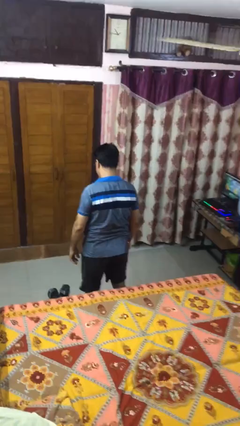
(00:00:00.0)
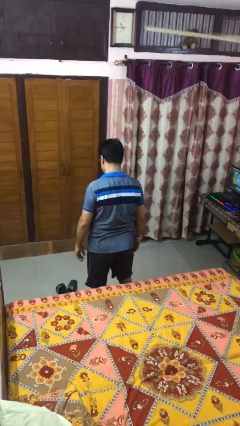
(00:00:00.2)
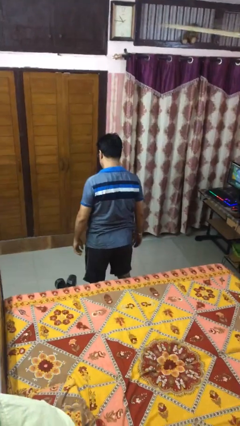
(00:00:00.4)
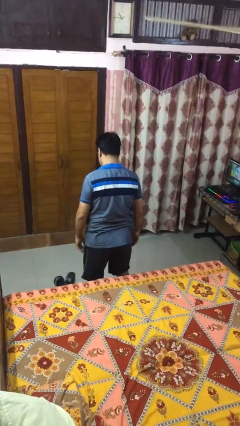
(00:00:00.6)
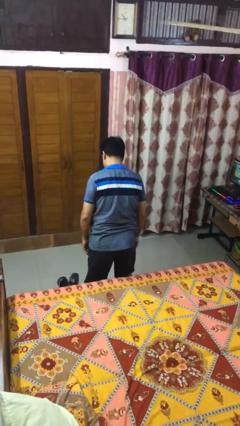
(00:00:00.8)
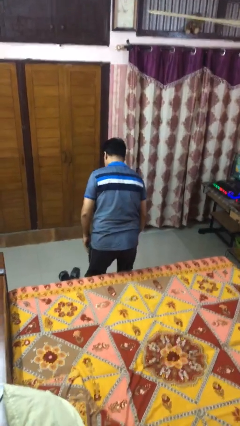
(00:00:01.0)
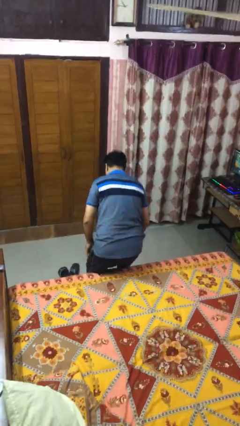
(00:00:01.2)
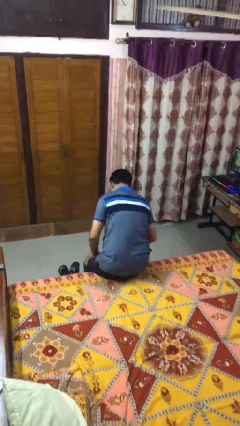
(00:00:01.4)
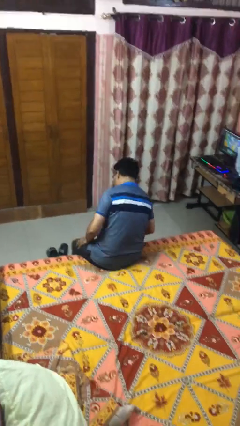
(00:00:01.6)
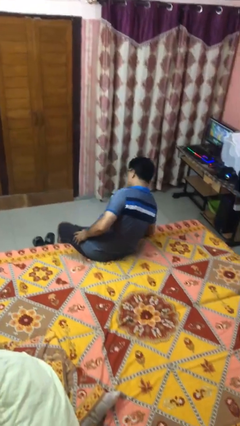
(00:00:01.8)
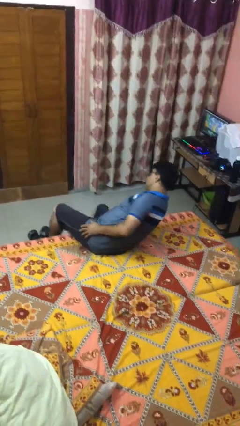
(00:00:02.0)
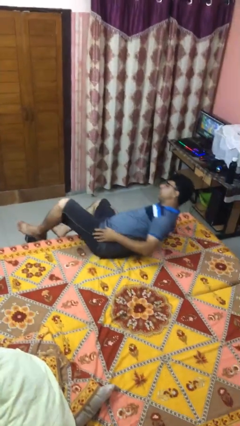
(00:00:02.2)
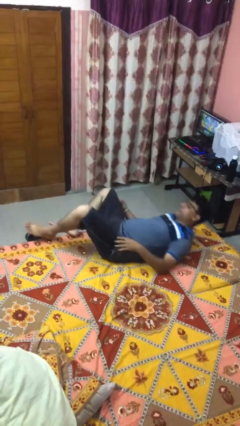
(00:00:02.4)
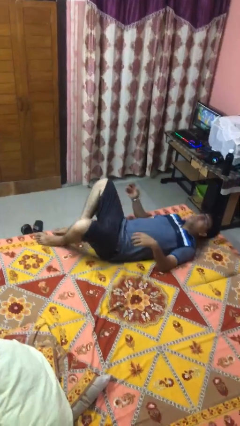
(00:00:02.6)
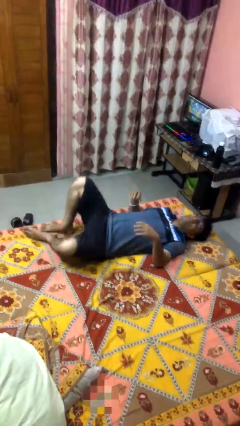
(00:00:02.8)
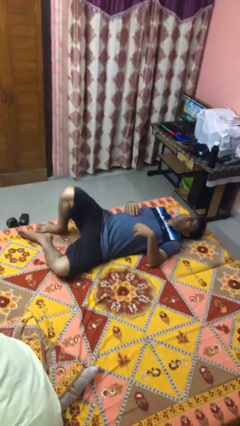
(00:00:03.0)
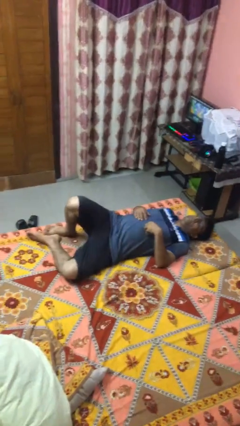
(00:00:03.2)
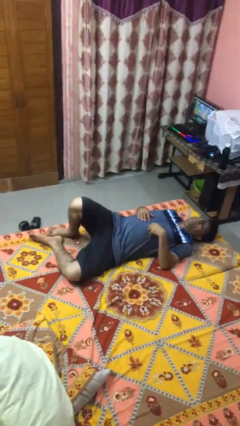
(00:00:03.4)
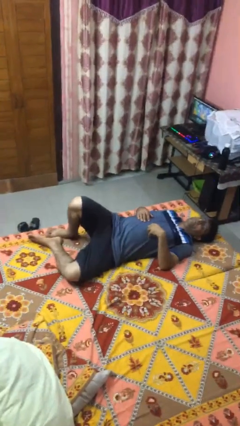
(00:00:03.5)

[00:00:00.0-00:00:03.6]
person lies down on bed

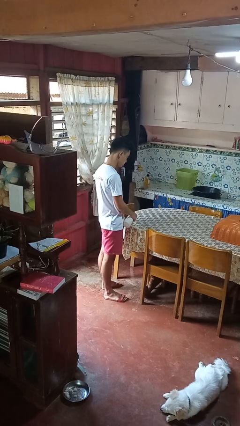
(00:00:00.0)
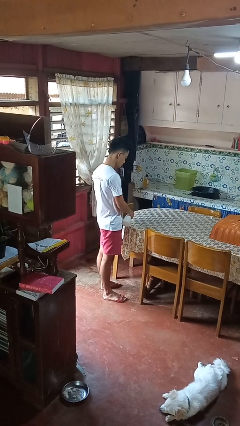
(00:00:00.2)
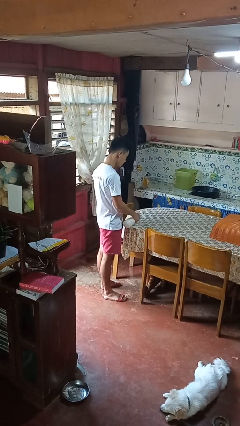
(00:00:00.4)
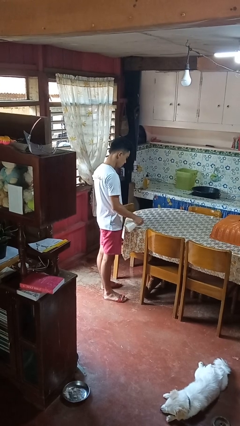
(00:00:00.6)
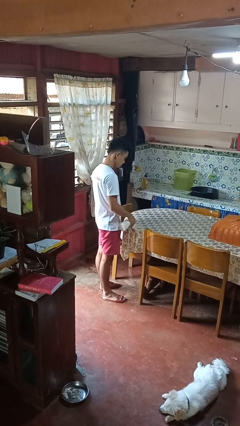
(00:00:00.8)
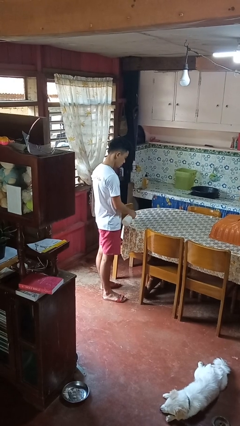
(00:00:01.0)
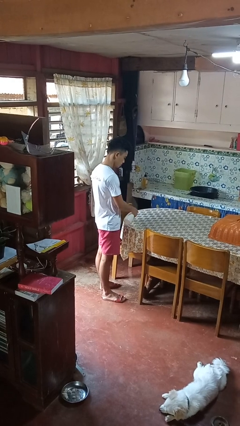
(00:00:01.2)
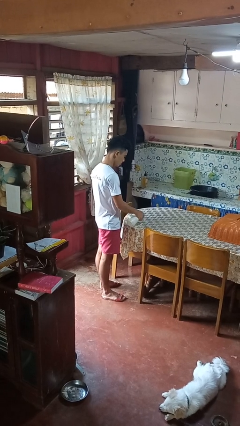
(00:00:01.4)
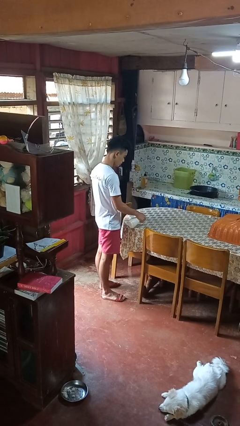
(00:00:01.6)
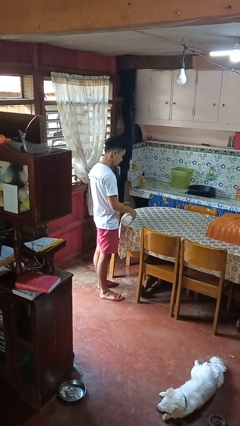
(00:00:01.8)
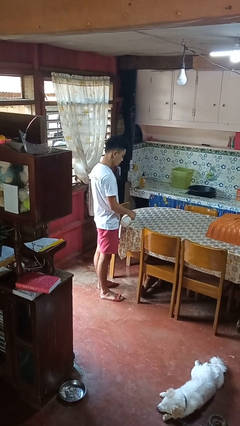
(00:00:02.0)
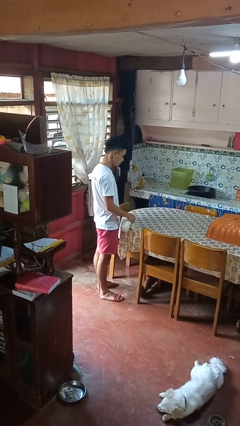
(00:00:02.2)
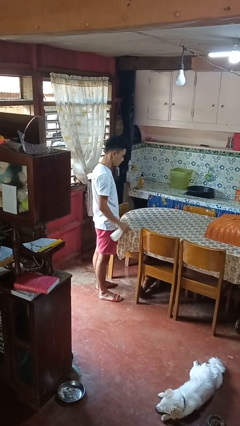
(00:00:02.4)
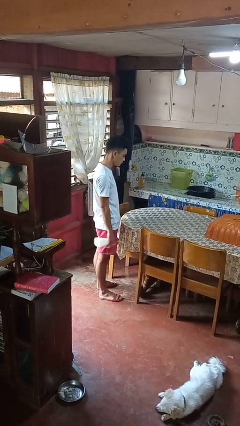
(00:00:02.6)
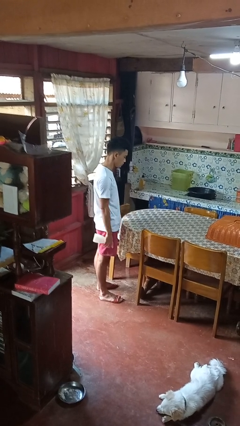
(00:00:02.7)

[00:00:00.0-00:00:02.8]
person sprays from bottle

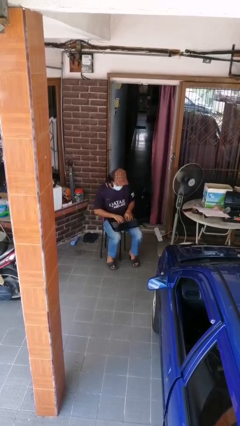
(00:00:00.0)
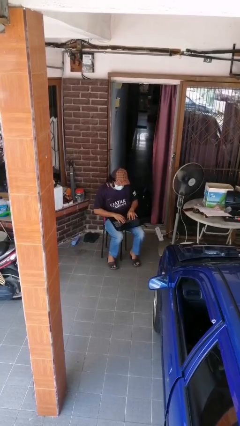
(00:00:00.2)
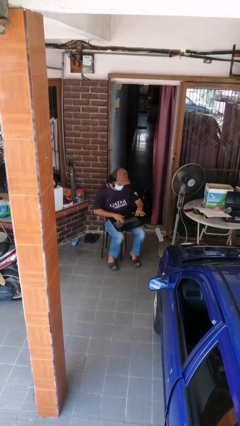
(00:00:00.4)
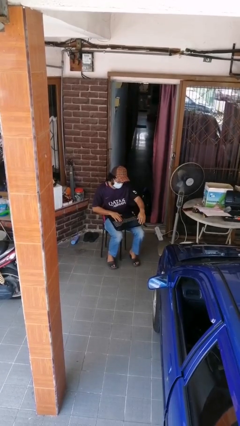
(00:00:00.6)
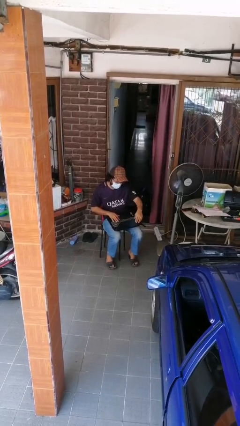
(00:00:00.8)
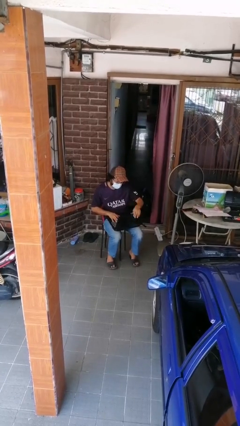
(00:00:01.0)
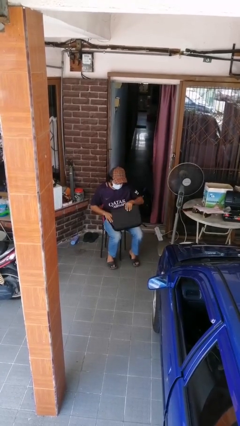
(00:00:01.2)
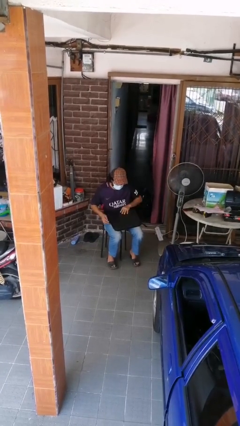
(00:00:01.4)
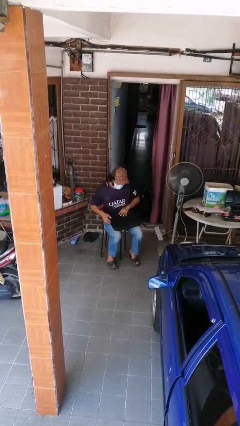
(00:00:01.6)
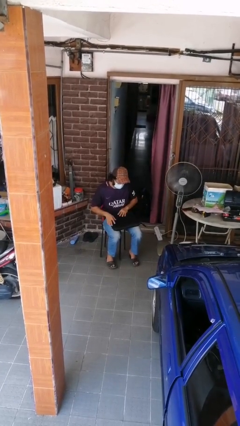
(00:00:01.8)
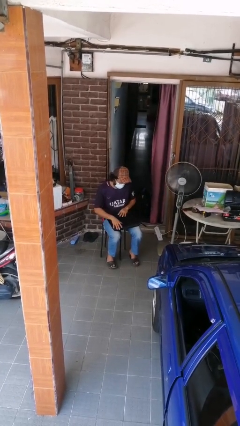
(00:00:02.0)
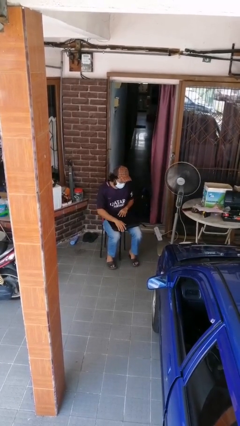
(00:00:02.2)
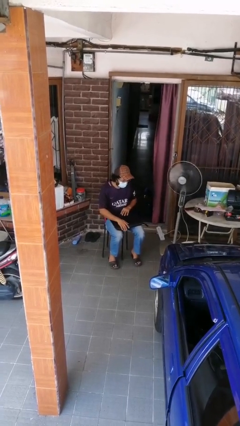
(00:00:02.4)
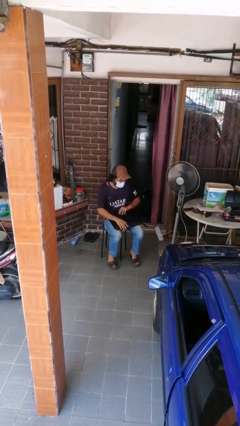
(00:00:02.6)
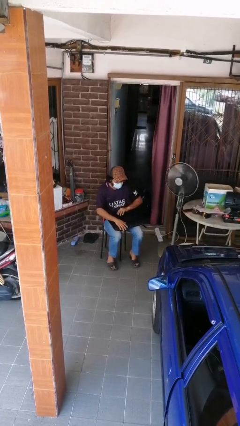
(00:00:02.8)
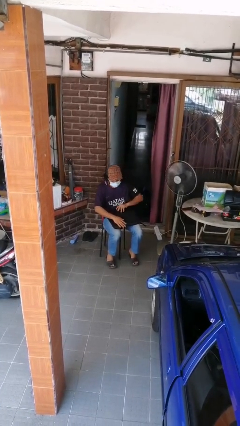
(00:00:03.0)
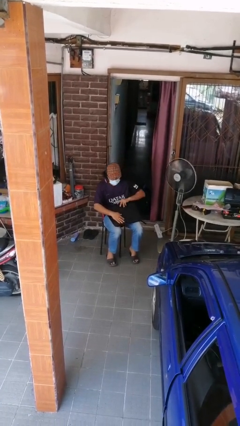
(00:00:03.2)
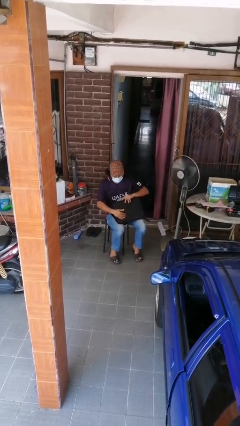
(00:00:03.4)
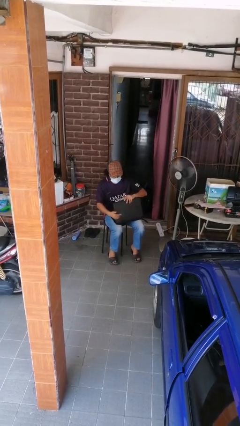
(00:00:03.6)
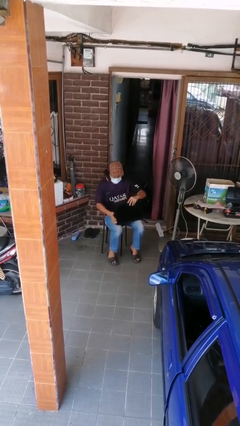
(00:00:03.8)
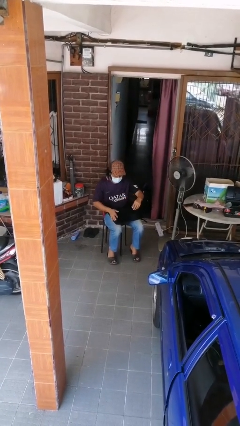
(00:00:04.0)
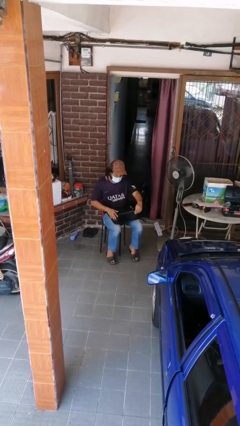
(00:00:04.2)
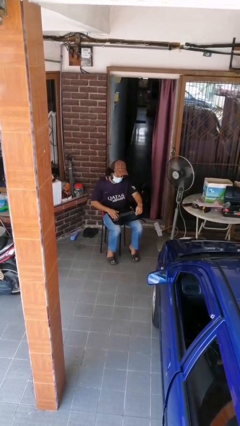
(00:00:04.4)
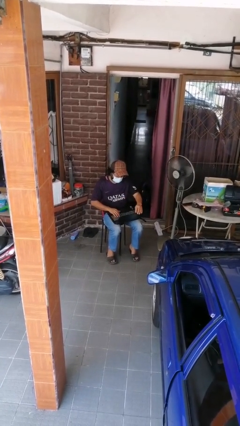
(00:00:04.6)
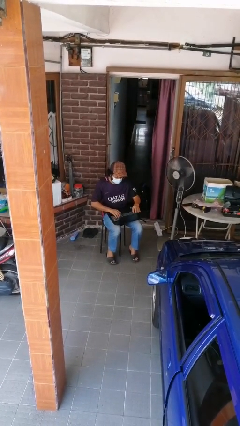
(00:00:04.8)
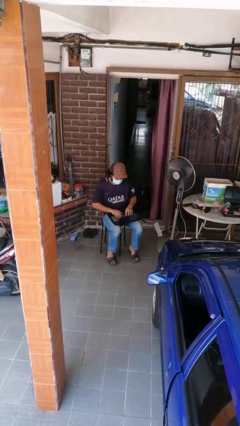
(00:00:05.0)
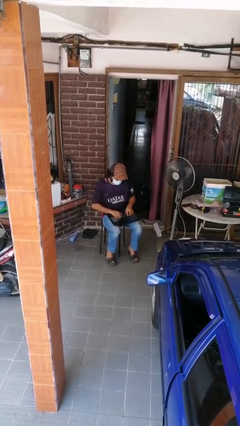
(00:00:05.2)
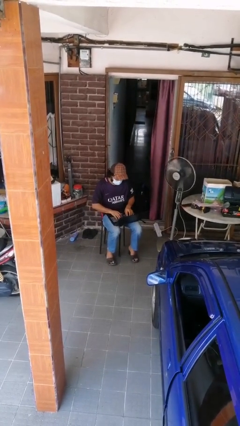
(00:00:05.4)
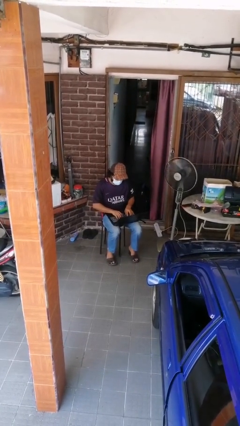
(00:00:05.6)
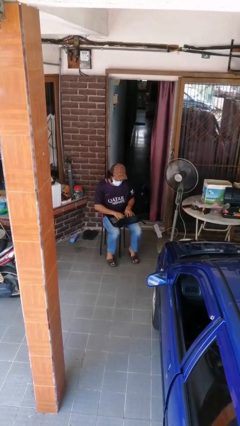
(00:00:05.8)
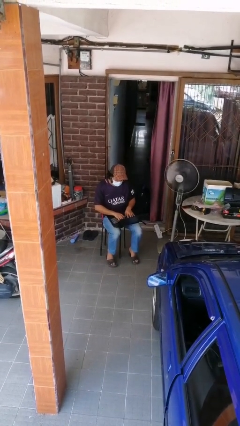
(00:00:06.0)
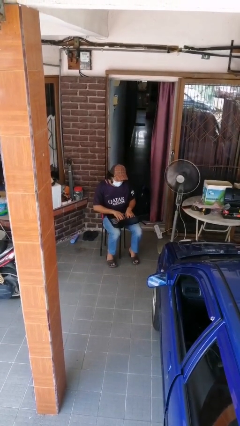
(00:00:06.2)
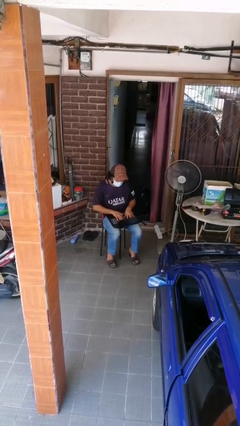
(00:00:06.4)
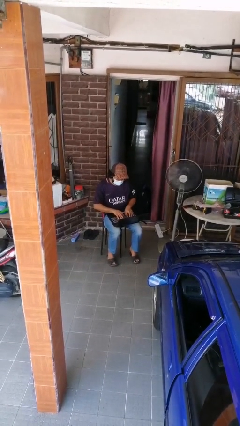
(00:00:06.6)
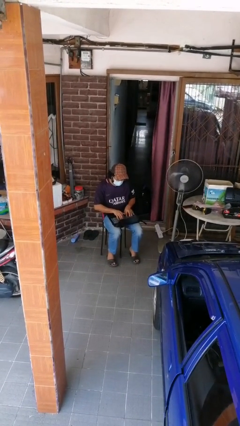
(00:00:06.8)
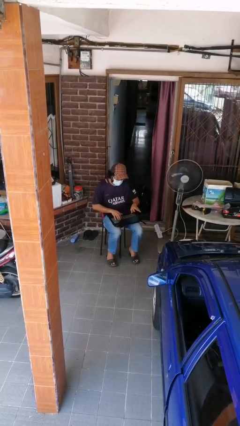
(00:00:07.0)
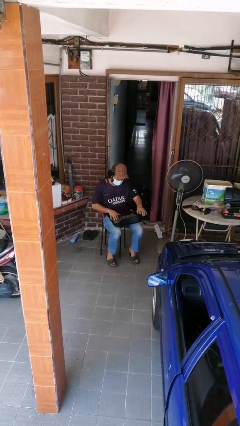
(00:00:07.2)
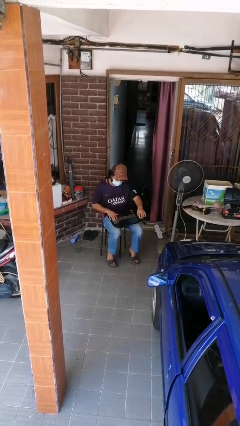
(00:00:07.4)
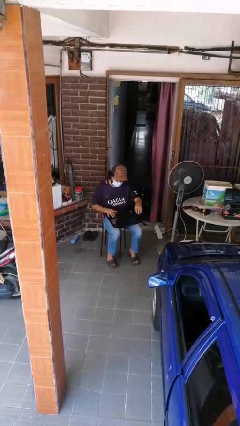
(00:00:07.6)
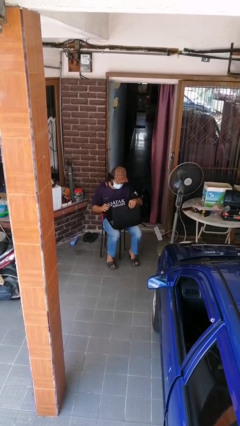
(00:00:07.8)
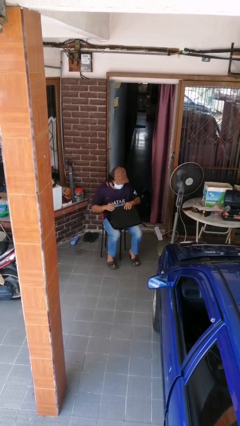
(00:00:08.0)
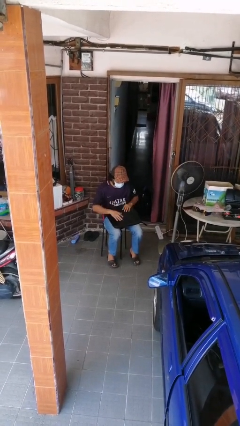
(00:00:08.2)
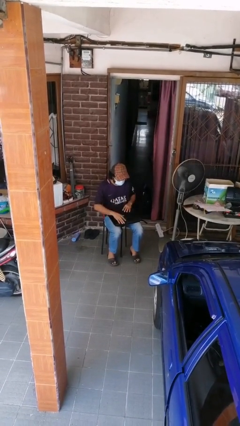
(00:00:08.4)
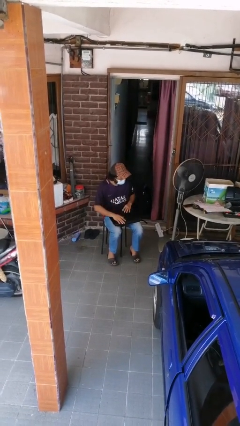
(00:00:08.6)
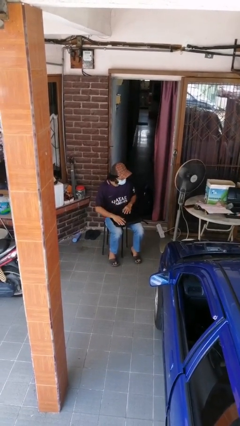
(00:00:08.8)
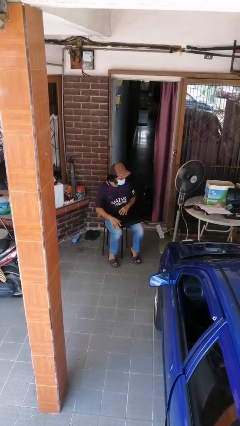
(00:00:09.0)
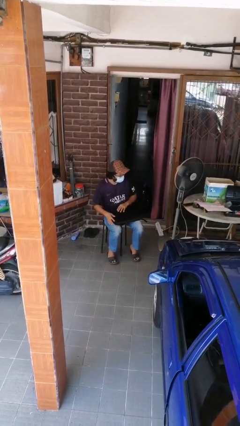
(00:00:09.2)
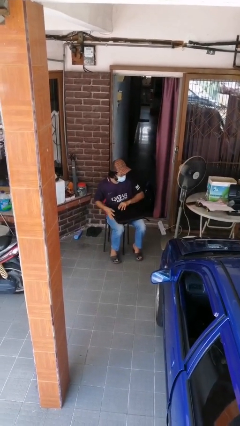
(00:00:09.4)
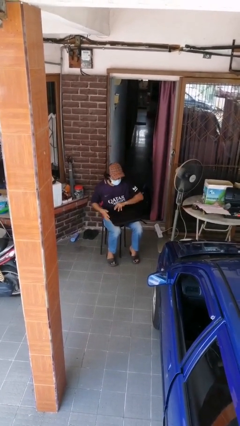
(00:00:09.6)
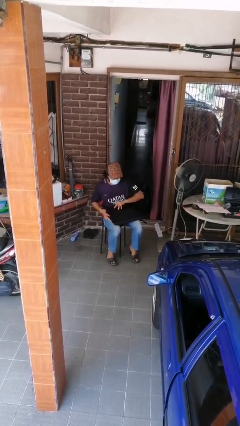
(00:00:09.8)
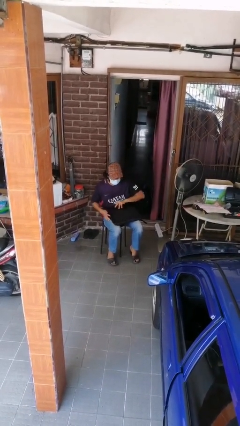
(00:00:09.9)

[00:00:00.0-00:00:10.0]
person interacts with laptop

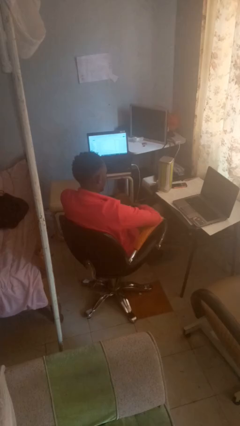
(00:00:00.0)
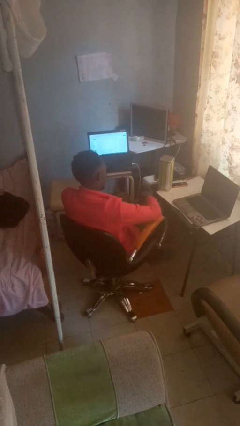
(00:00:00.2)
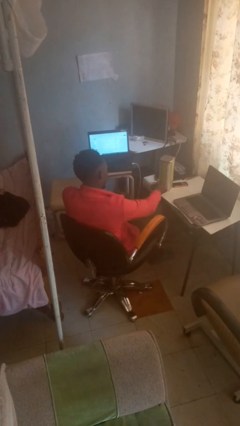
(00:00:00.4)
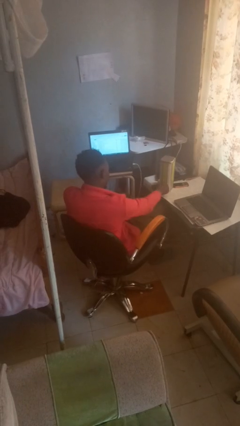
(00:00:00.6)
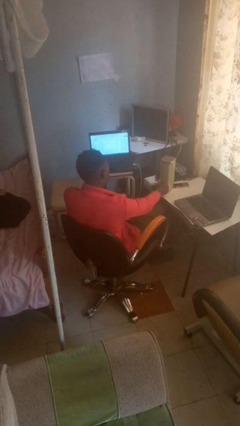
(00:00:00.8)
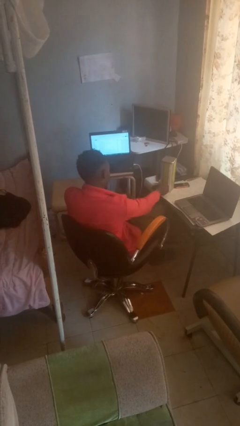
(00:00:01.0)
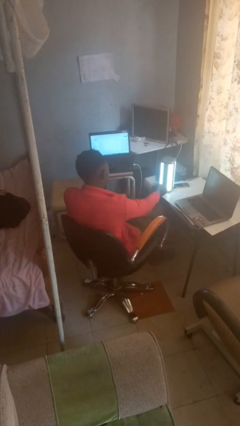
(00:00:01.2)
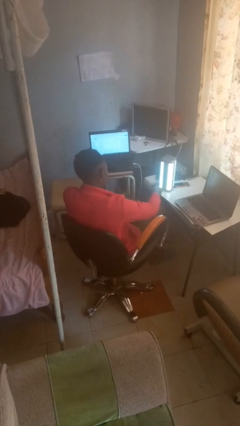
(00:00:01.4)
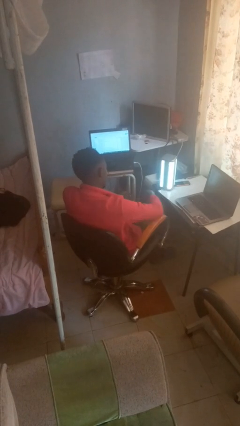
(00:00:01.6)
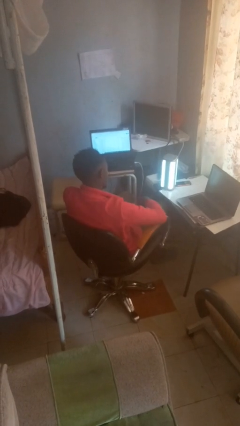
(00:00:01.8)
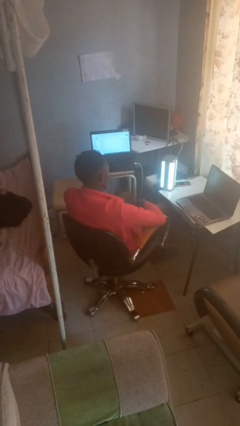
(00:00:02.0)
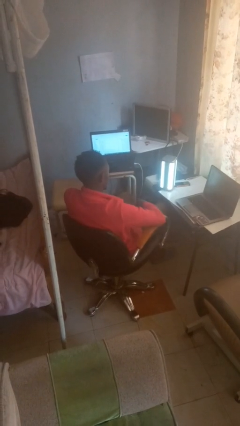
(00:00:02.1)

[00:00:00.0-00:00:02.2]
person turns on lamp
